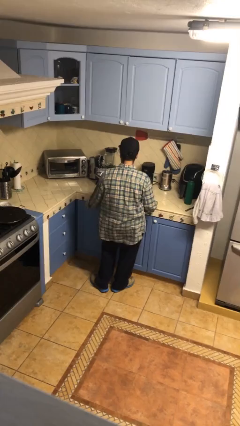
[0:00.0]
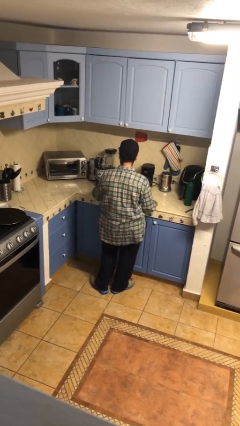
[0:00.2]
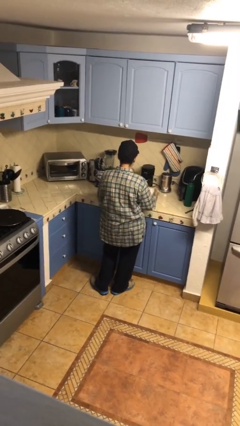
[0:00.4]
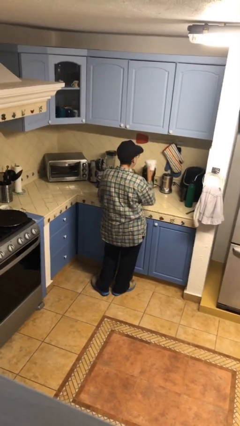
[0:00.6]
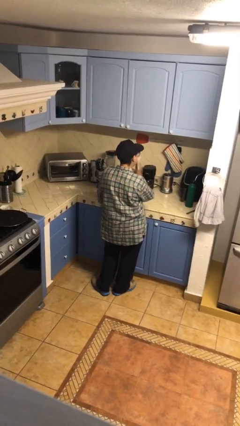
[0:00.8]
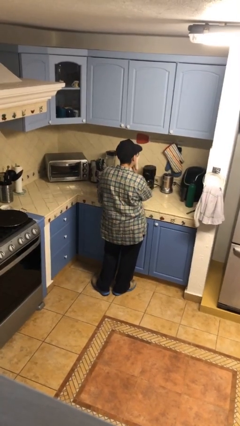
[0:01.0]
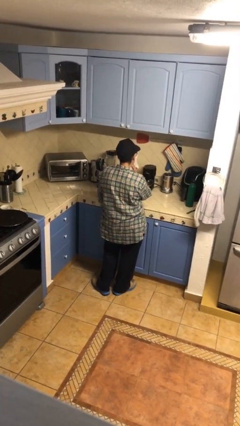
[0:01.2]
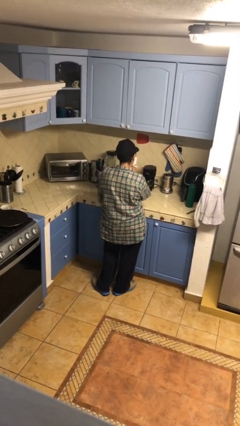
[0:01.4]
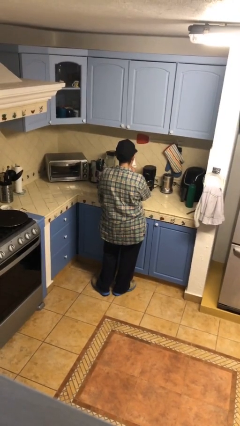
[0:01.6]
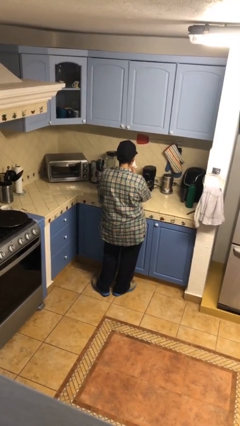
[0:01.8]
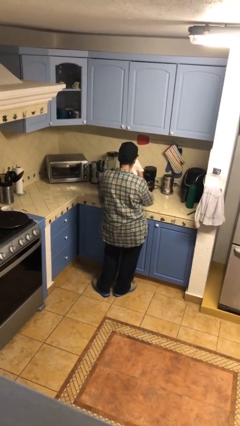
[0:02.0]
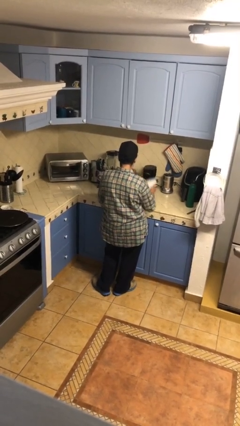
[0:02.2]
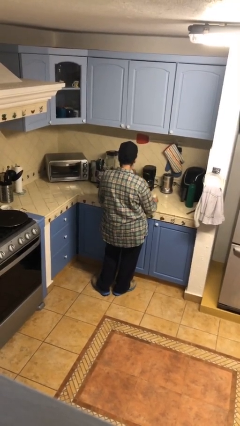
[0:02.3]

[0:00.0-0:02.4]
person wipes mouth with napkin

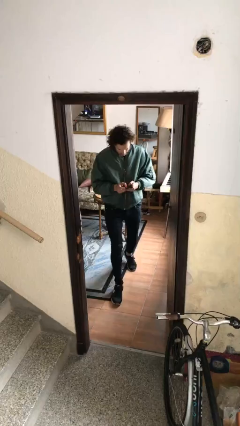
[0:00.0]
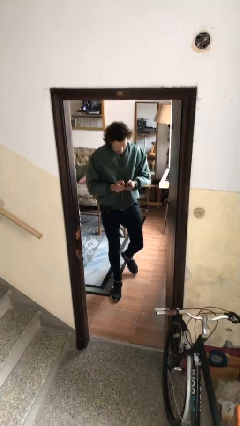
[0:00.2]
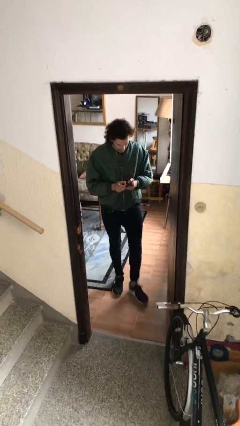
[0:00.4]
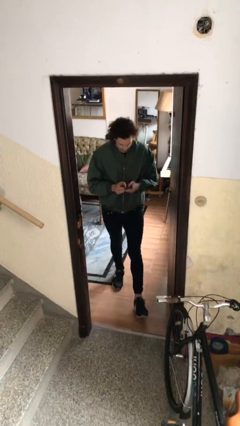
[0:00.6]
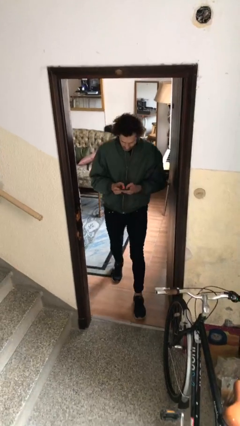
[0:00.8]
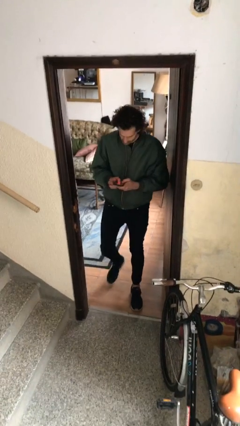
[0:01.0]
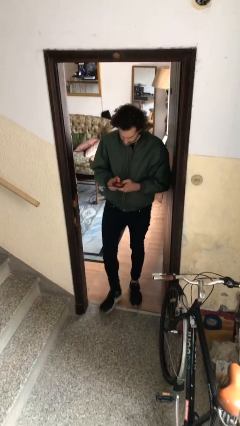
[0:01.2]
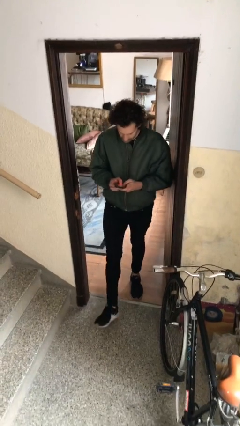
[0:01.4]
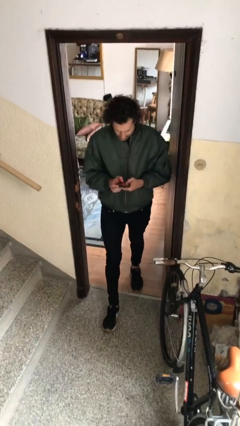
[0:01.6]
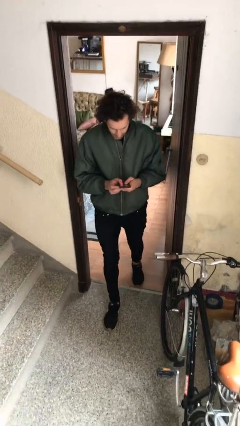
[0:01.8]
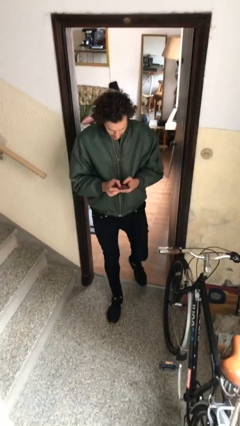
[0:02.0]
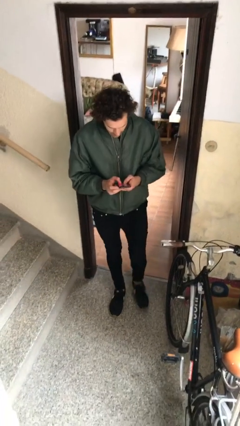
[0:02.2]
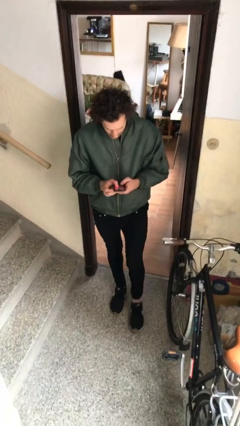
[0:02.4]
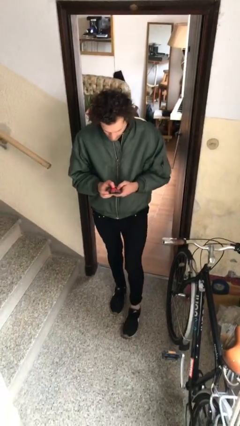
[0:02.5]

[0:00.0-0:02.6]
person enters scene through structure

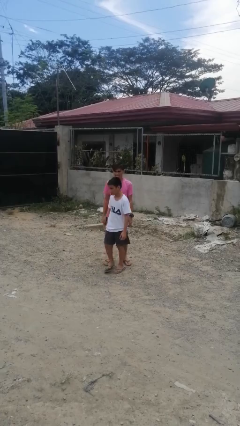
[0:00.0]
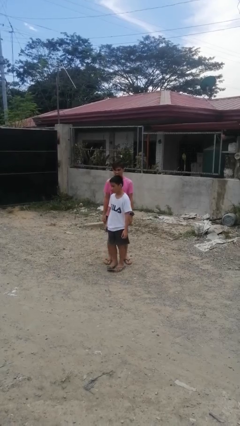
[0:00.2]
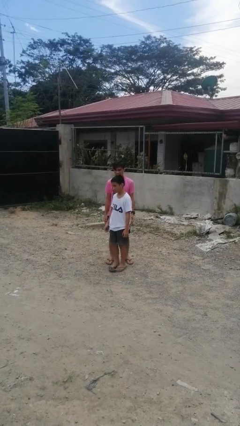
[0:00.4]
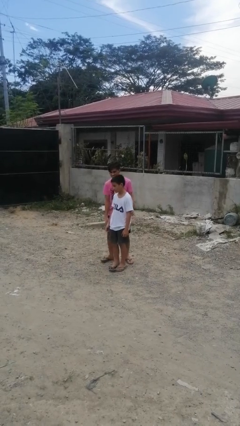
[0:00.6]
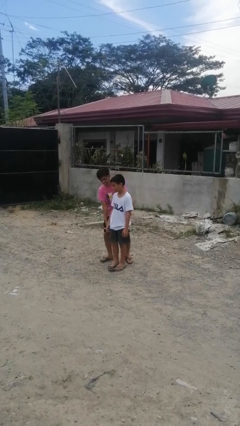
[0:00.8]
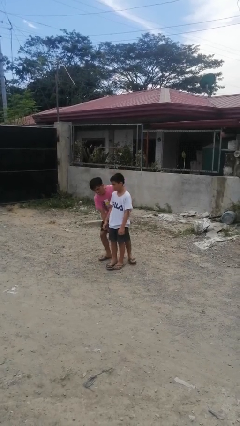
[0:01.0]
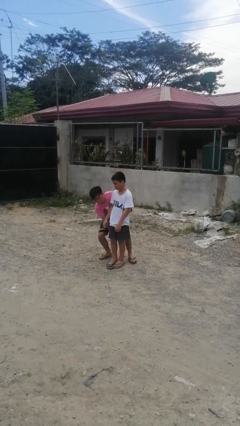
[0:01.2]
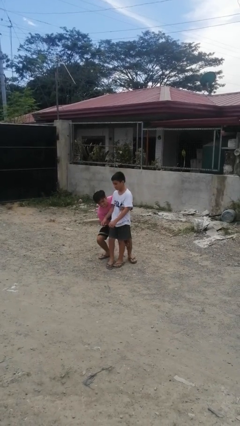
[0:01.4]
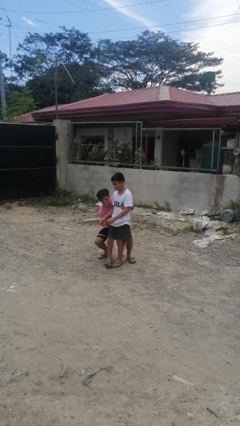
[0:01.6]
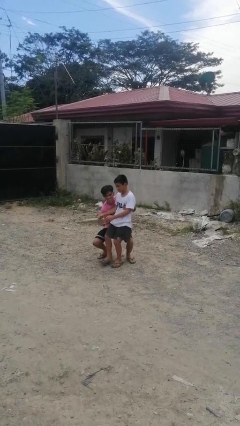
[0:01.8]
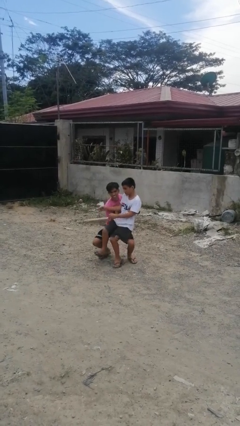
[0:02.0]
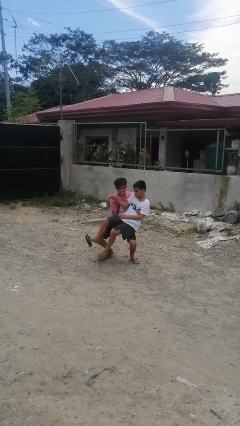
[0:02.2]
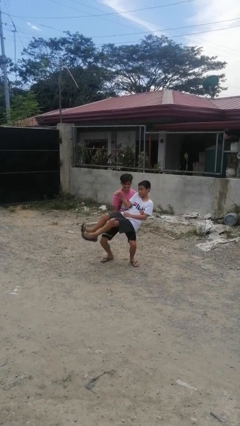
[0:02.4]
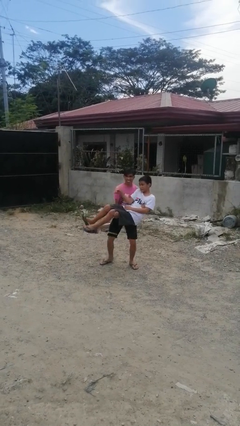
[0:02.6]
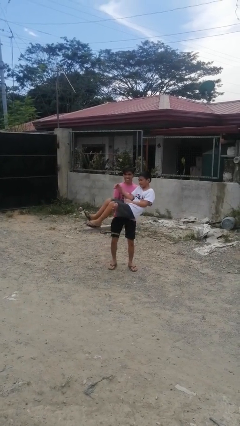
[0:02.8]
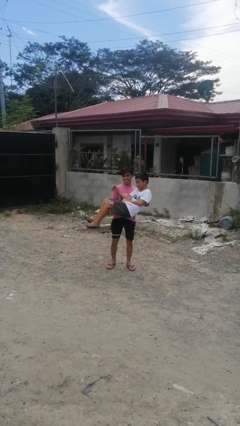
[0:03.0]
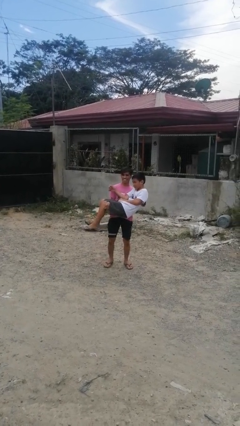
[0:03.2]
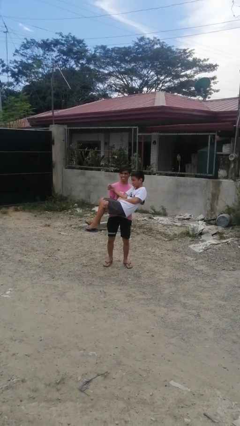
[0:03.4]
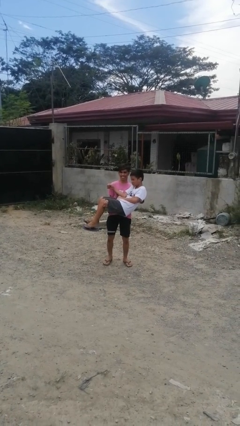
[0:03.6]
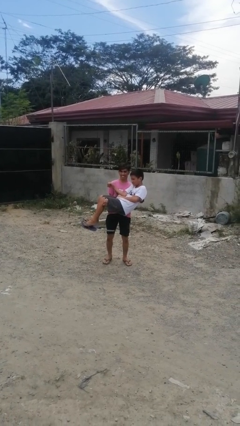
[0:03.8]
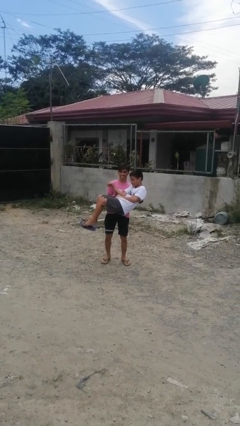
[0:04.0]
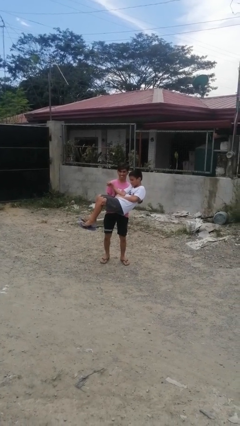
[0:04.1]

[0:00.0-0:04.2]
person picks up person

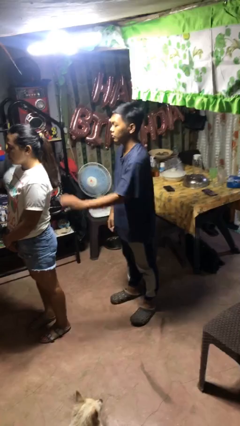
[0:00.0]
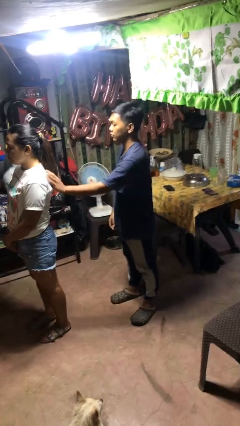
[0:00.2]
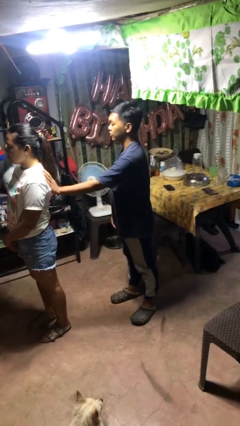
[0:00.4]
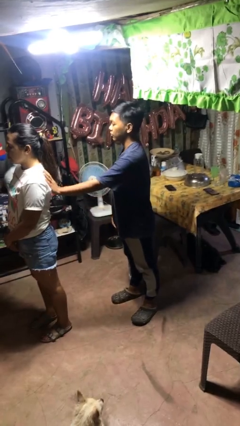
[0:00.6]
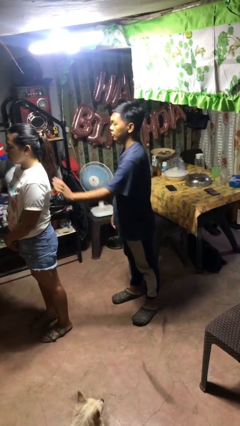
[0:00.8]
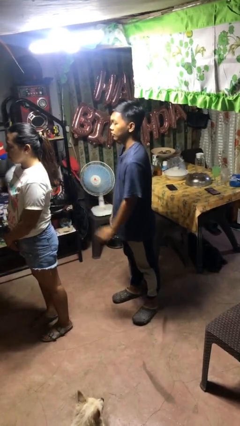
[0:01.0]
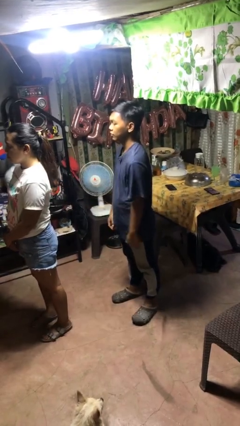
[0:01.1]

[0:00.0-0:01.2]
person touches back of person

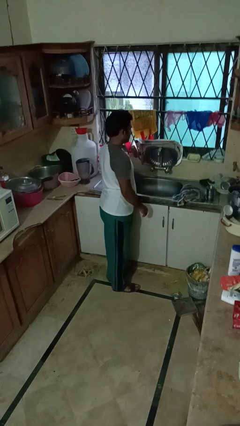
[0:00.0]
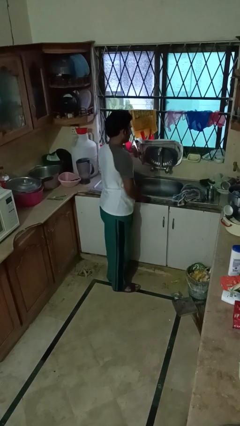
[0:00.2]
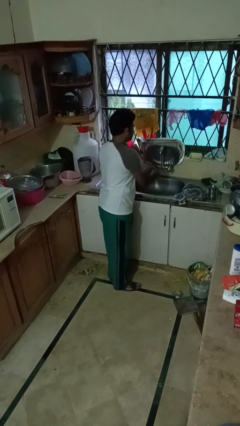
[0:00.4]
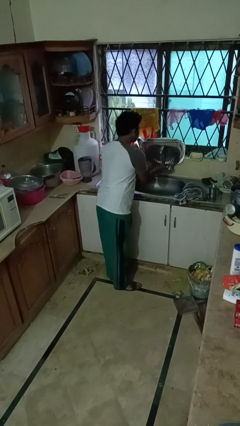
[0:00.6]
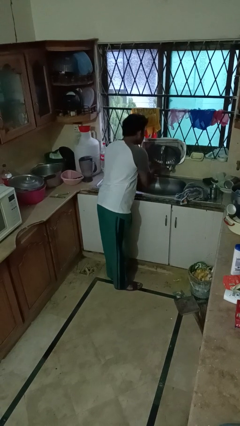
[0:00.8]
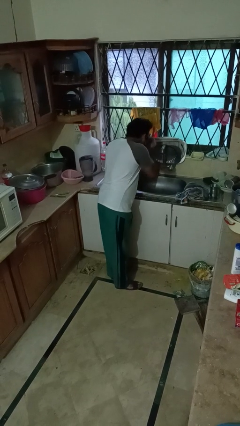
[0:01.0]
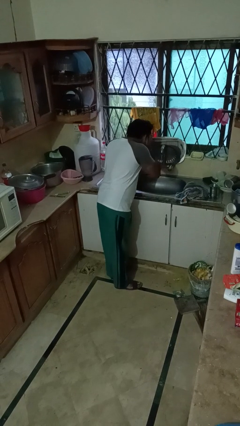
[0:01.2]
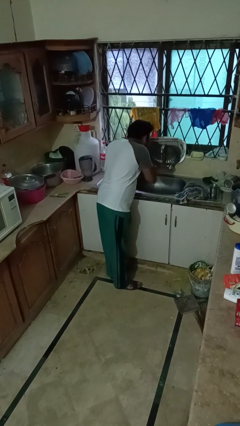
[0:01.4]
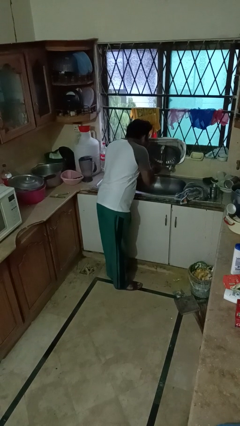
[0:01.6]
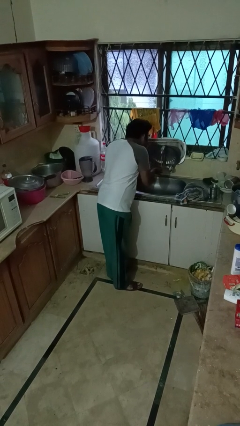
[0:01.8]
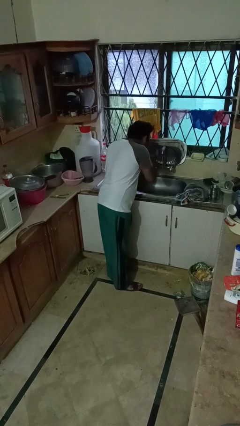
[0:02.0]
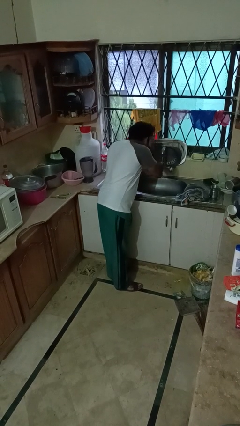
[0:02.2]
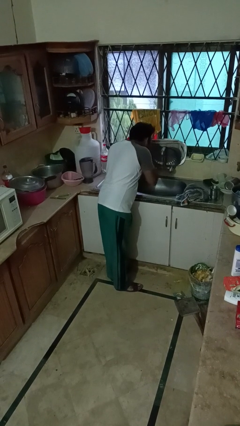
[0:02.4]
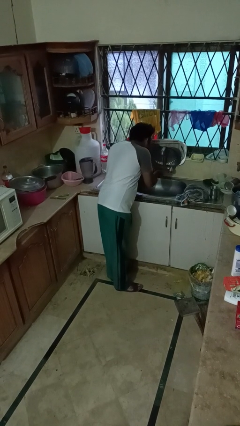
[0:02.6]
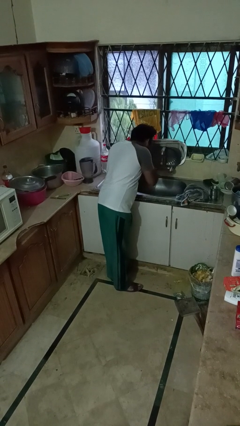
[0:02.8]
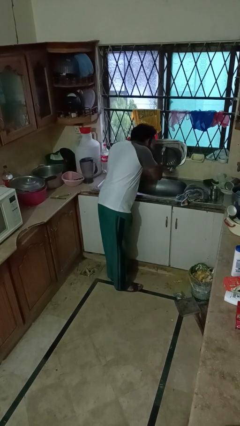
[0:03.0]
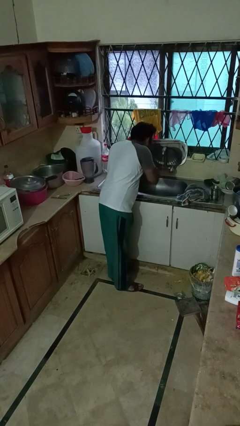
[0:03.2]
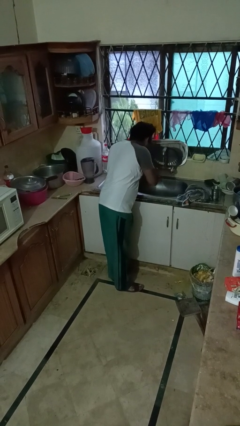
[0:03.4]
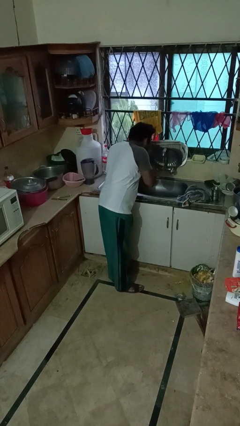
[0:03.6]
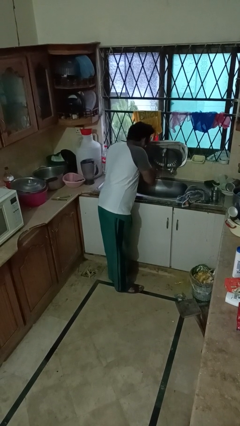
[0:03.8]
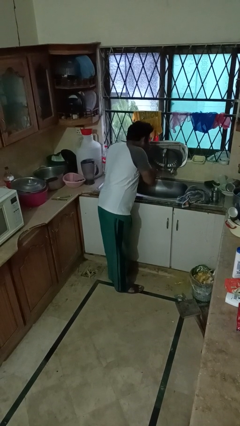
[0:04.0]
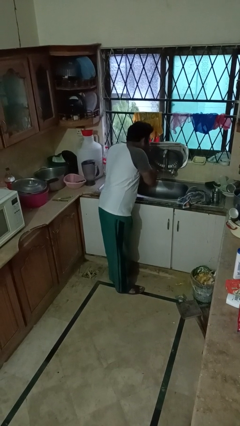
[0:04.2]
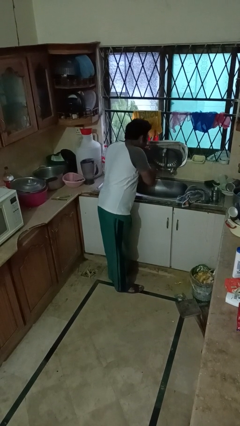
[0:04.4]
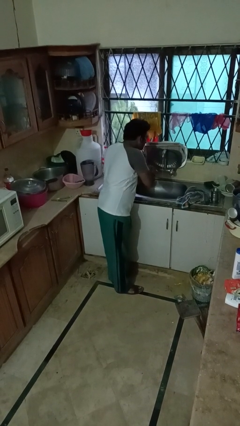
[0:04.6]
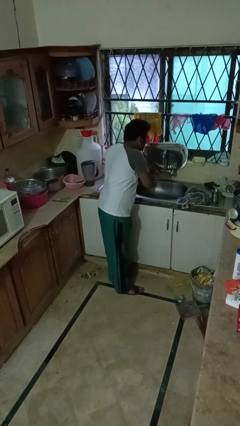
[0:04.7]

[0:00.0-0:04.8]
person washes face

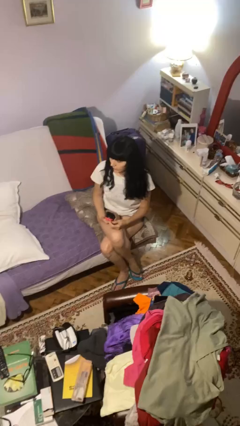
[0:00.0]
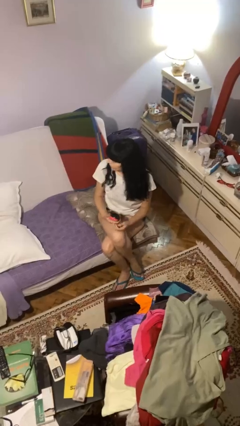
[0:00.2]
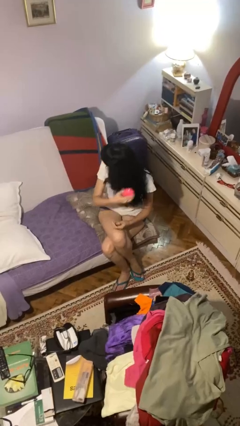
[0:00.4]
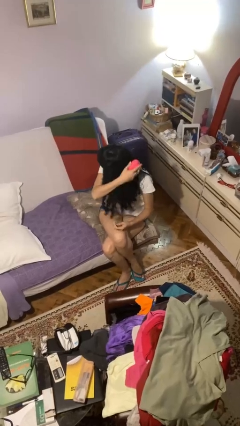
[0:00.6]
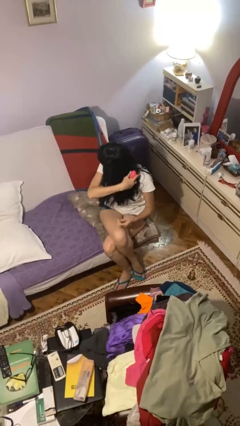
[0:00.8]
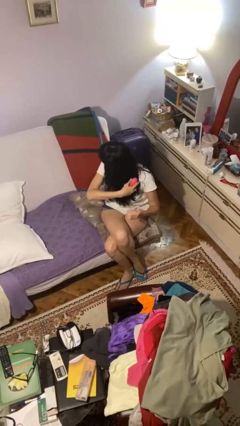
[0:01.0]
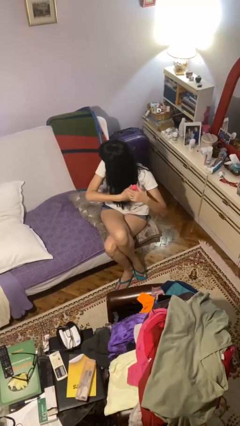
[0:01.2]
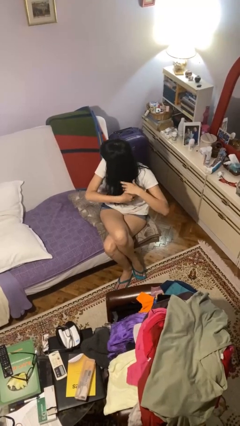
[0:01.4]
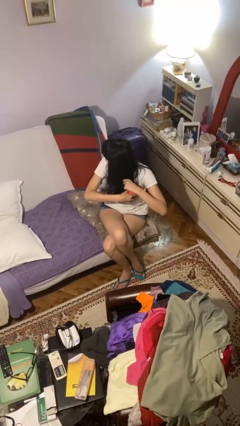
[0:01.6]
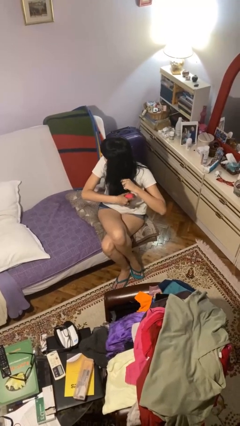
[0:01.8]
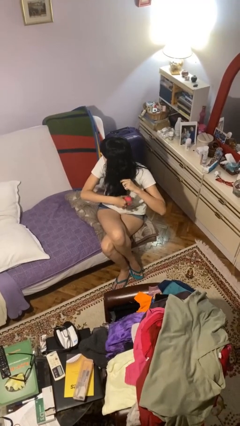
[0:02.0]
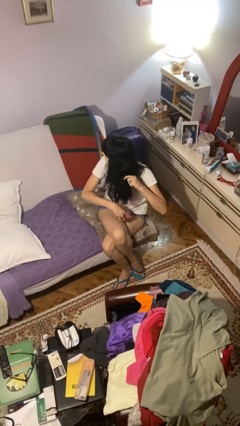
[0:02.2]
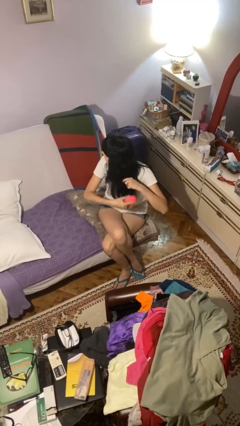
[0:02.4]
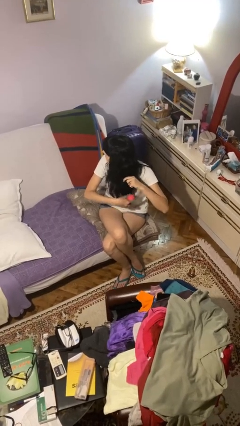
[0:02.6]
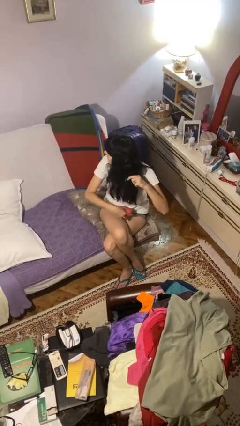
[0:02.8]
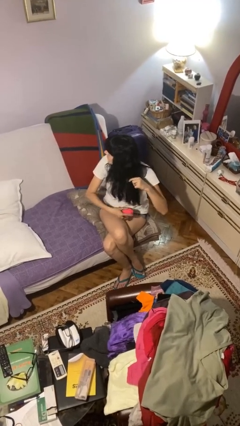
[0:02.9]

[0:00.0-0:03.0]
person brushes hair
